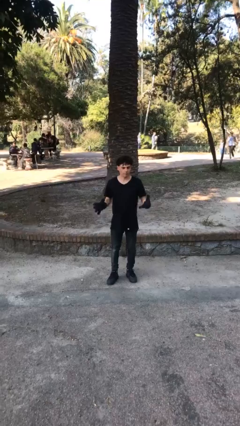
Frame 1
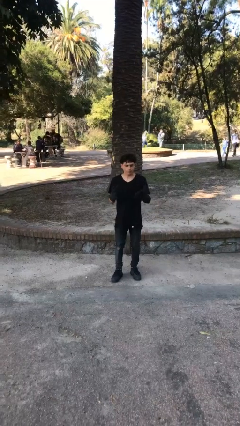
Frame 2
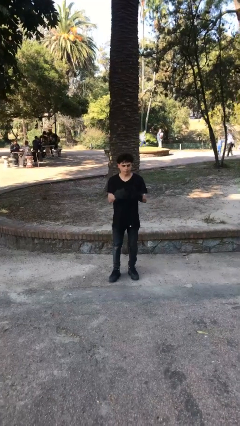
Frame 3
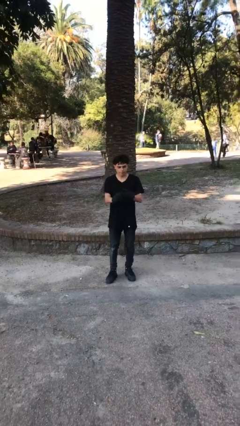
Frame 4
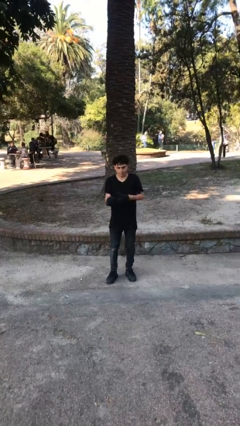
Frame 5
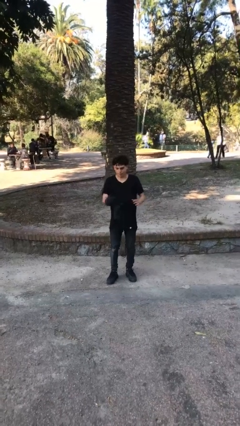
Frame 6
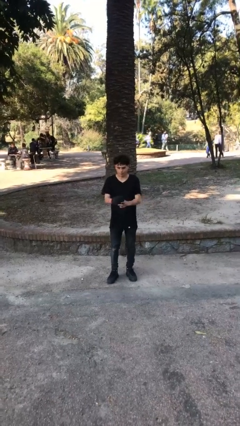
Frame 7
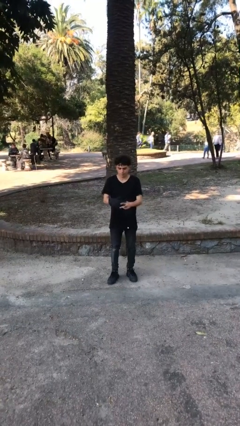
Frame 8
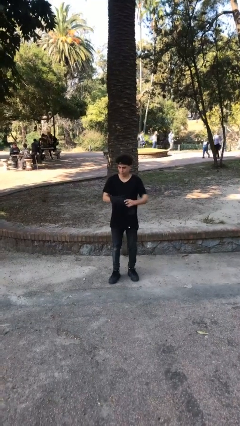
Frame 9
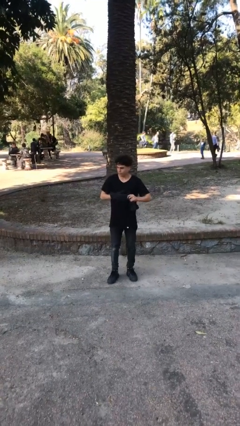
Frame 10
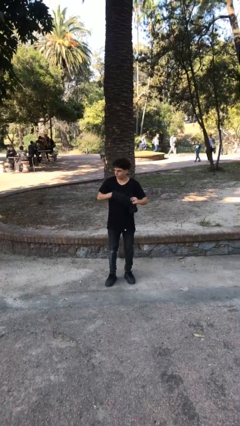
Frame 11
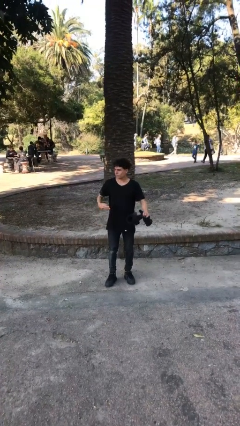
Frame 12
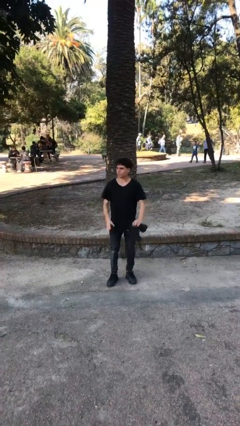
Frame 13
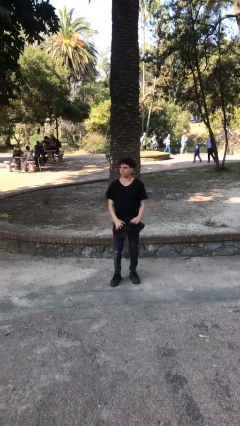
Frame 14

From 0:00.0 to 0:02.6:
person takes off gloves

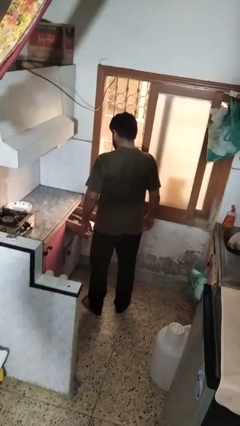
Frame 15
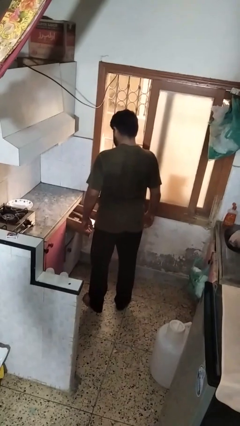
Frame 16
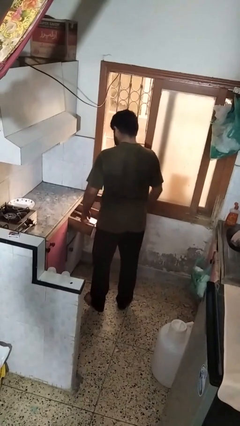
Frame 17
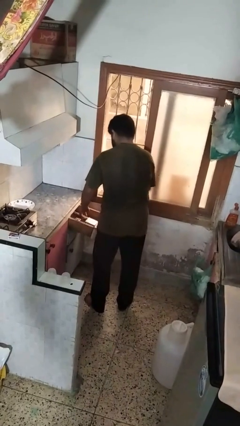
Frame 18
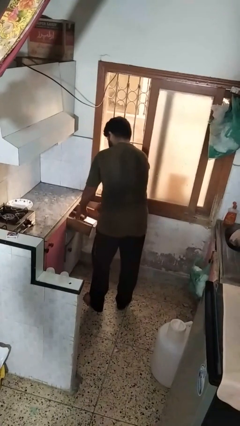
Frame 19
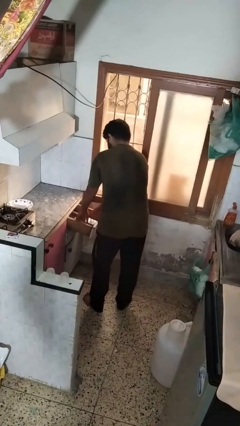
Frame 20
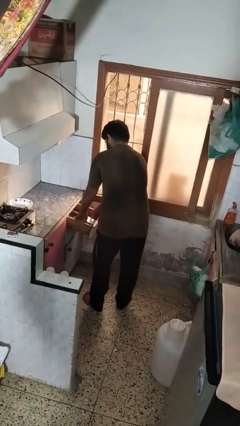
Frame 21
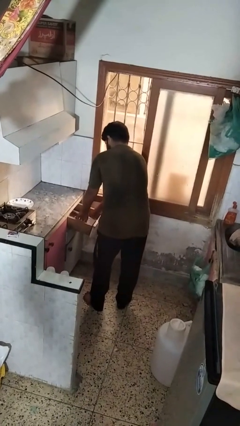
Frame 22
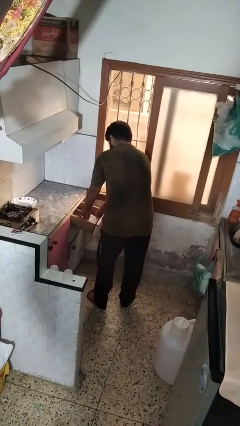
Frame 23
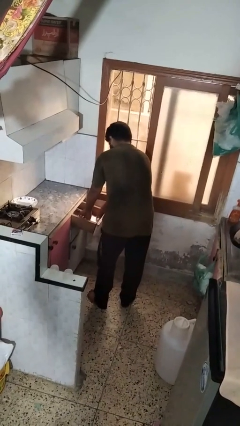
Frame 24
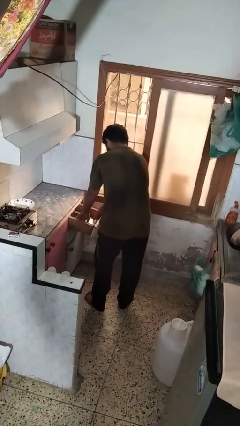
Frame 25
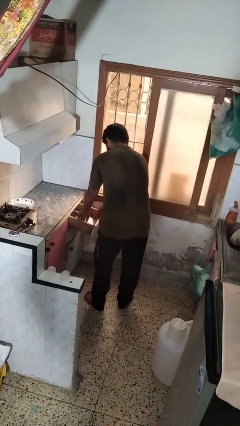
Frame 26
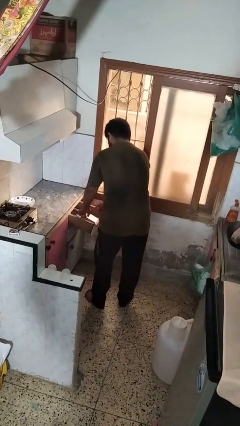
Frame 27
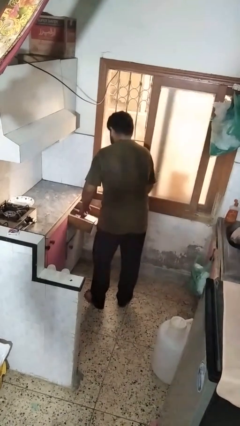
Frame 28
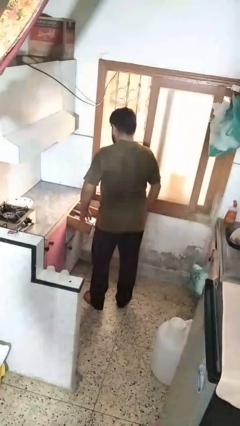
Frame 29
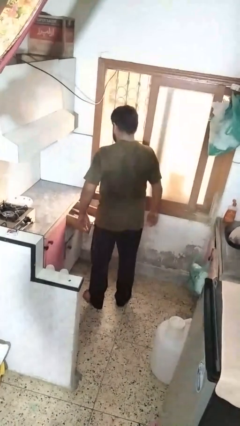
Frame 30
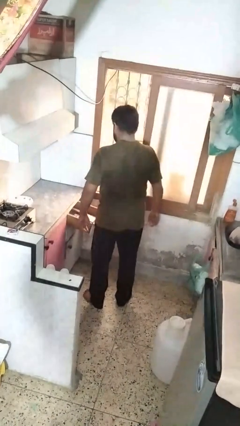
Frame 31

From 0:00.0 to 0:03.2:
person searches in kitchen drawer

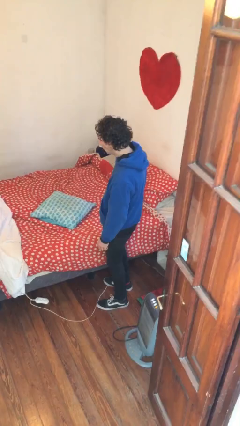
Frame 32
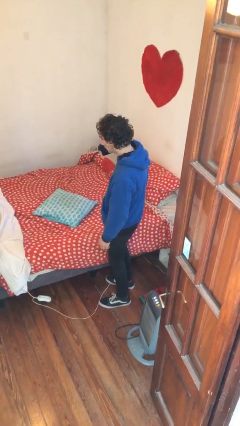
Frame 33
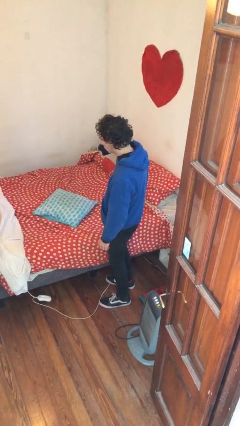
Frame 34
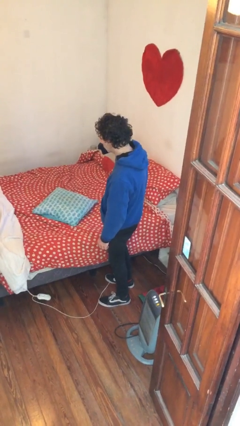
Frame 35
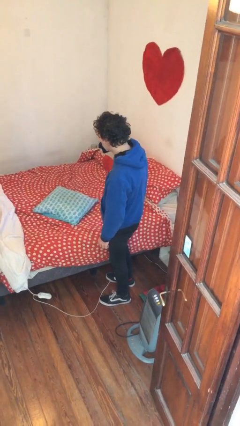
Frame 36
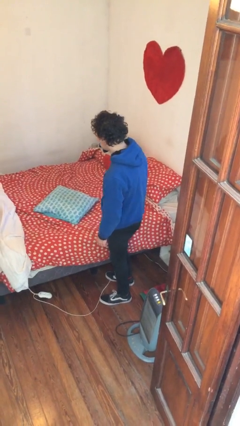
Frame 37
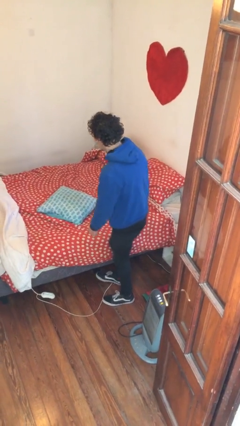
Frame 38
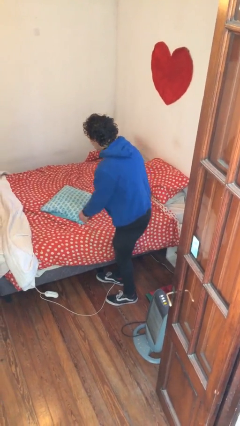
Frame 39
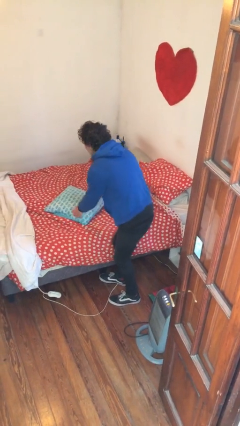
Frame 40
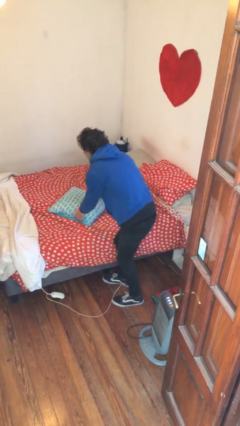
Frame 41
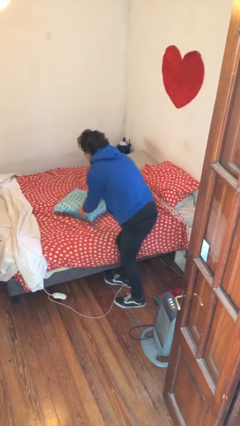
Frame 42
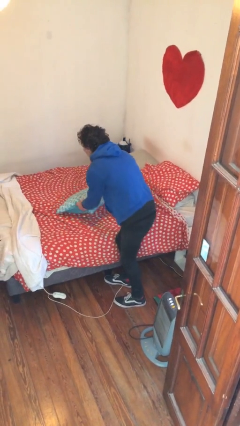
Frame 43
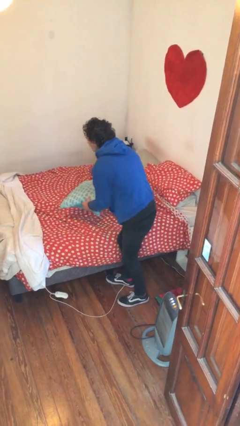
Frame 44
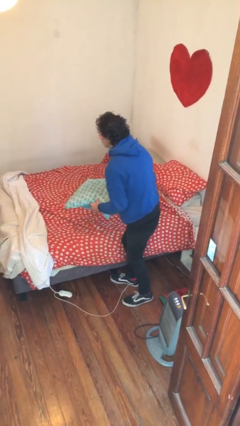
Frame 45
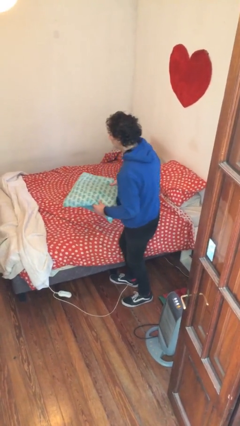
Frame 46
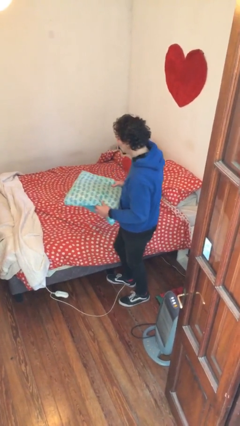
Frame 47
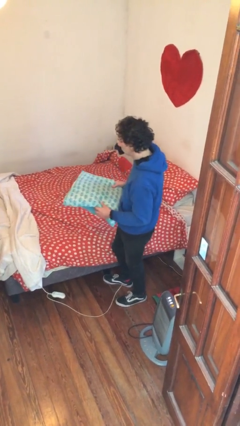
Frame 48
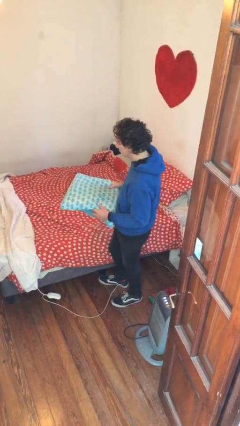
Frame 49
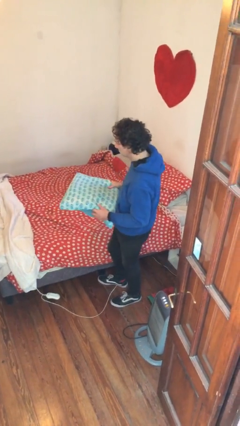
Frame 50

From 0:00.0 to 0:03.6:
person picks up object from bed

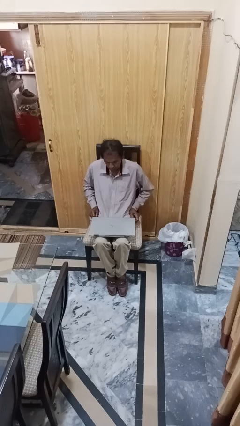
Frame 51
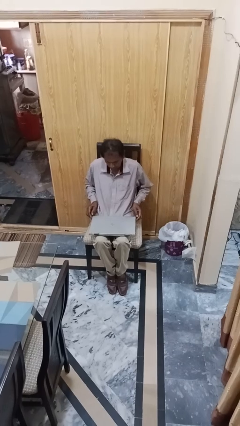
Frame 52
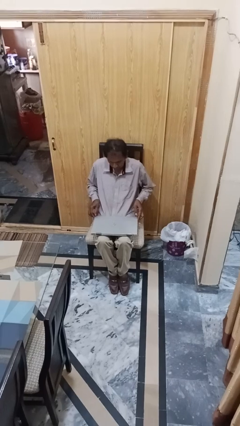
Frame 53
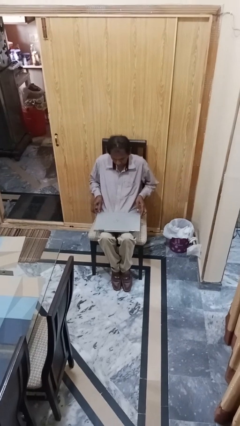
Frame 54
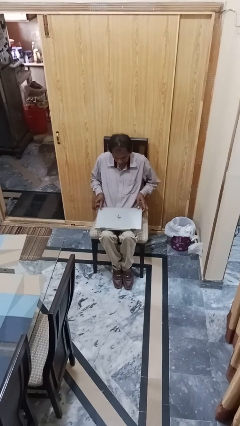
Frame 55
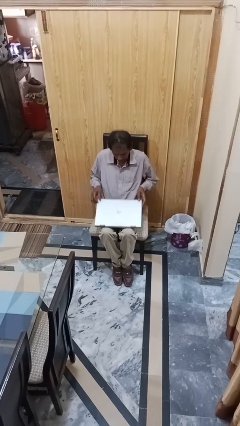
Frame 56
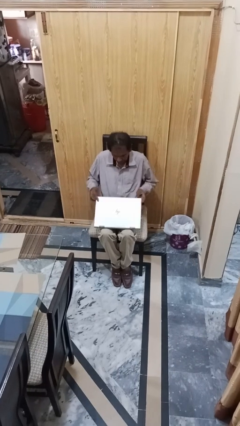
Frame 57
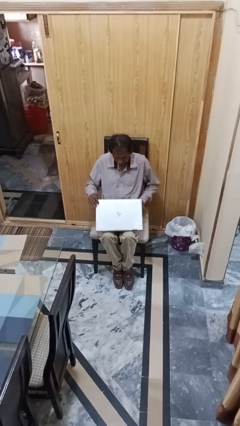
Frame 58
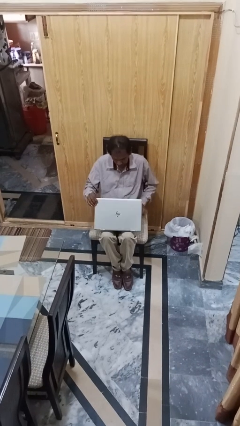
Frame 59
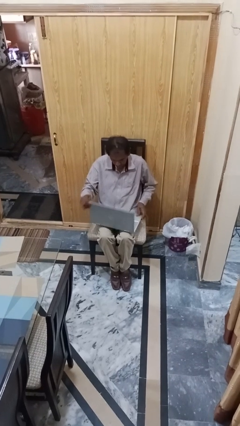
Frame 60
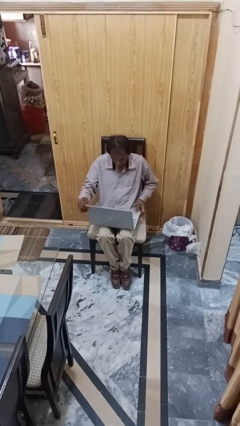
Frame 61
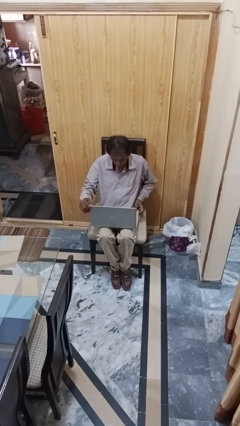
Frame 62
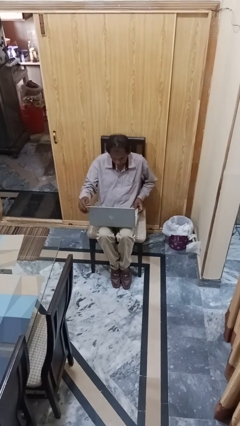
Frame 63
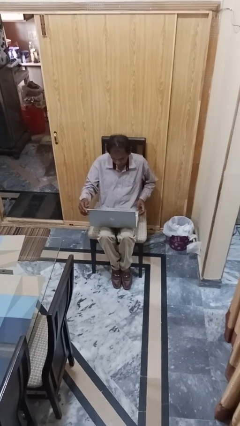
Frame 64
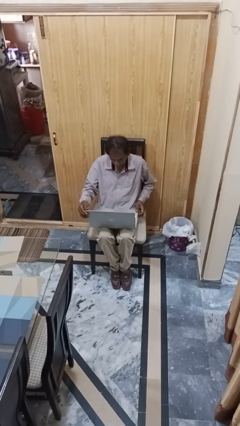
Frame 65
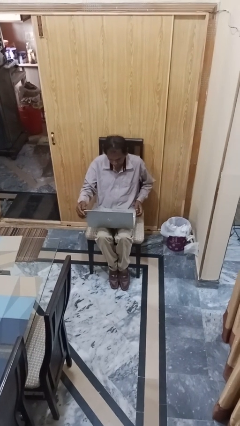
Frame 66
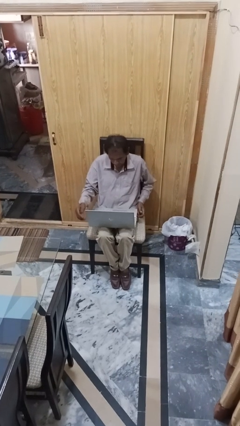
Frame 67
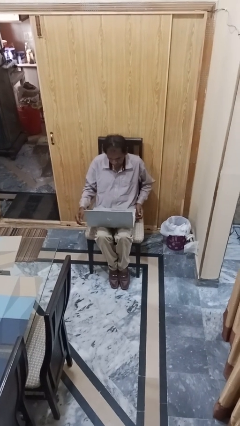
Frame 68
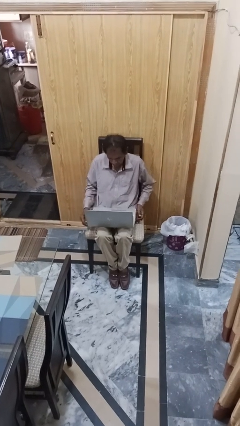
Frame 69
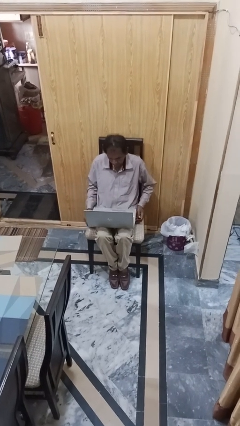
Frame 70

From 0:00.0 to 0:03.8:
person opens laptop

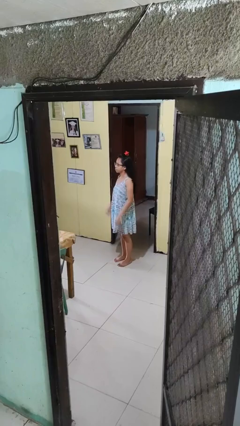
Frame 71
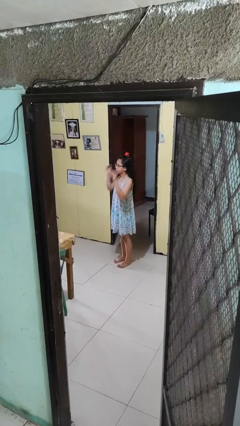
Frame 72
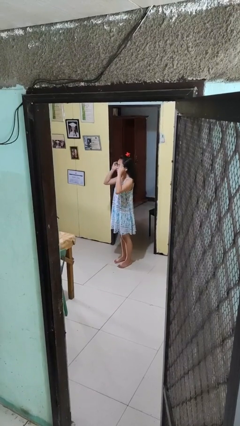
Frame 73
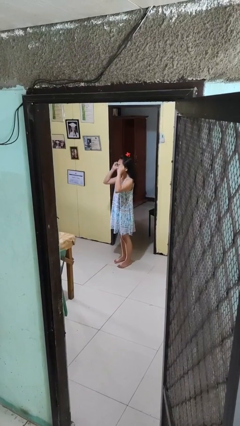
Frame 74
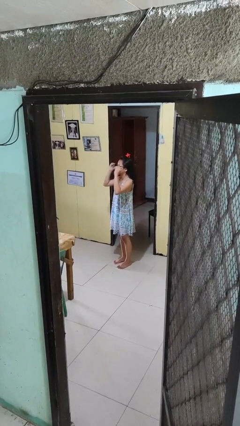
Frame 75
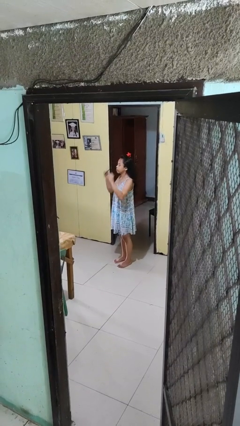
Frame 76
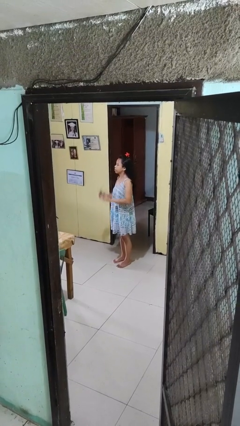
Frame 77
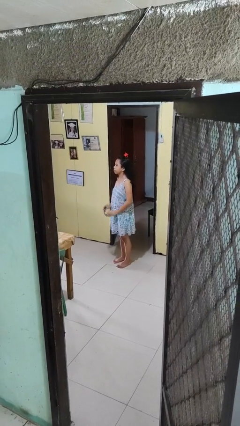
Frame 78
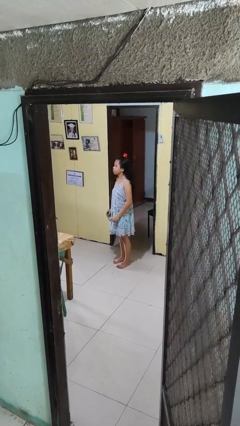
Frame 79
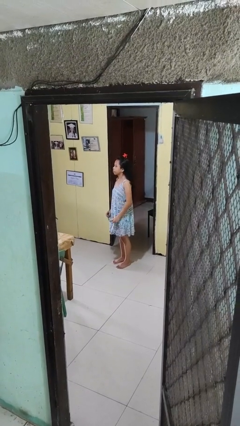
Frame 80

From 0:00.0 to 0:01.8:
person takes off glasses

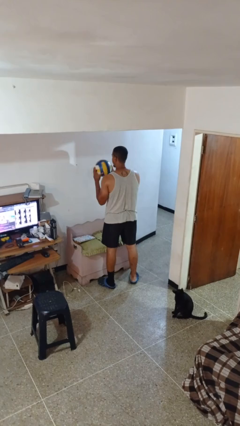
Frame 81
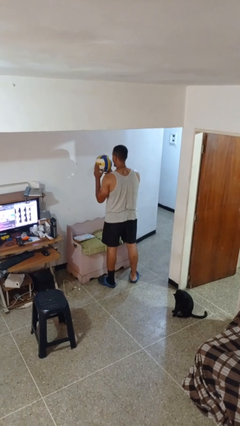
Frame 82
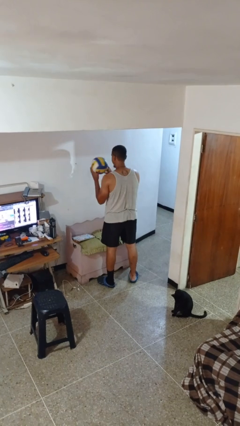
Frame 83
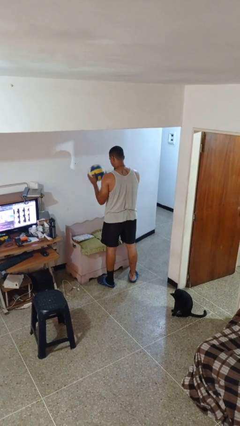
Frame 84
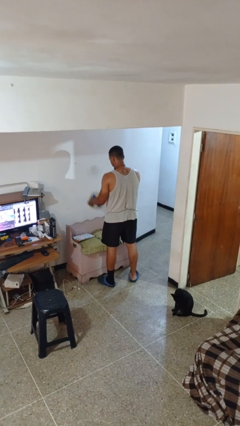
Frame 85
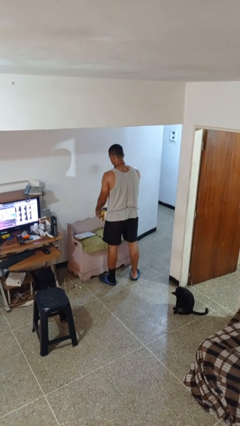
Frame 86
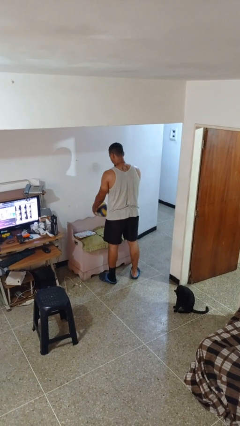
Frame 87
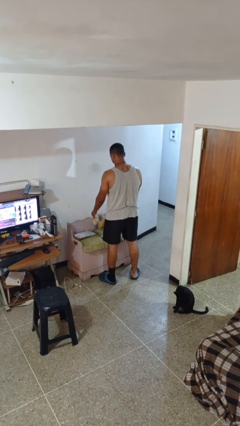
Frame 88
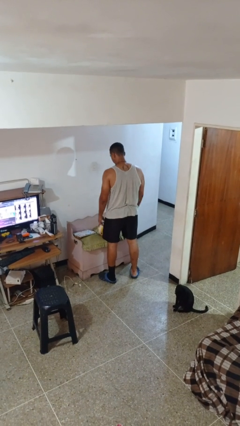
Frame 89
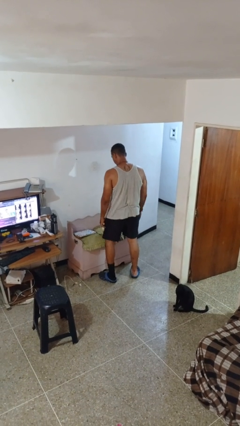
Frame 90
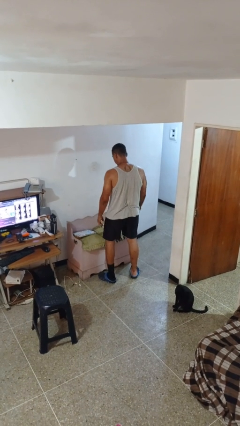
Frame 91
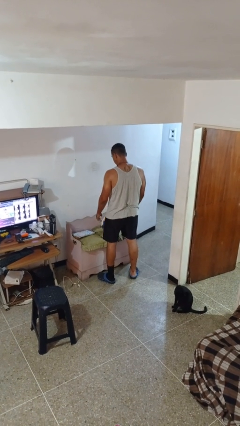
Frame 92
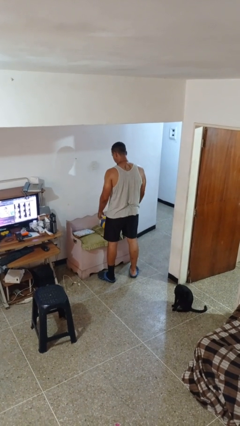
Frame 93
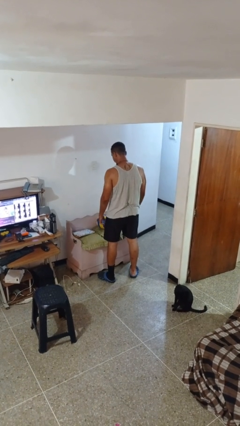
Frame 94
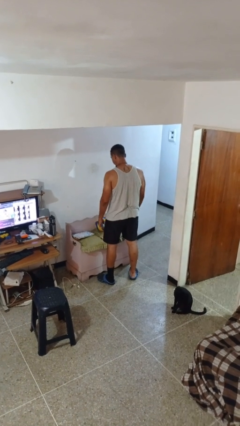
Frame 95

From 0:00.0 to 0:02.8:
person puts down object on couch
